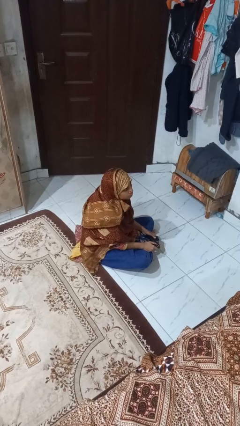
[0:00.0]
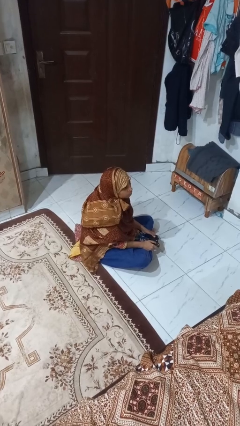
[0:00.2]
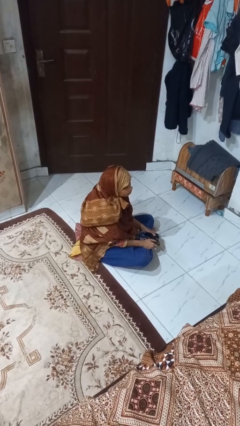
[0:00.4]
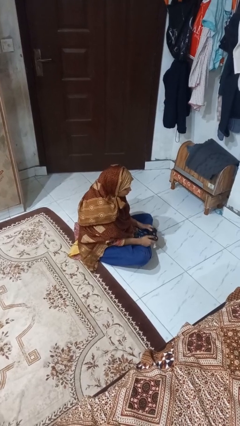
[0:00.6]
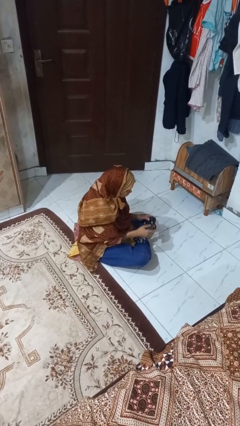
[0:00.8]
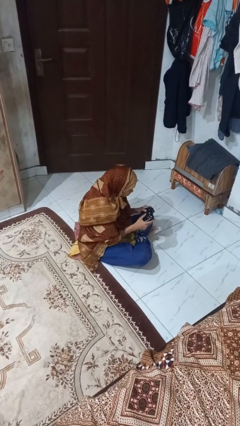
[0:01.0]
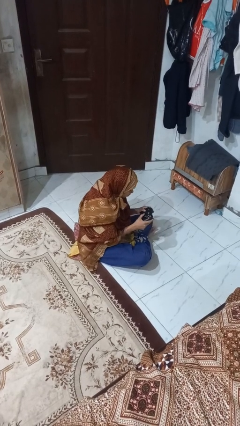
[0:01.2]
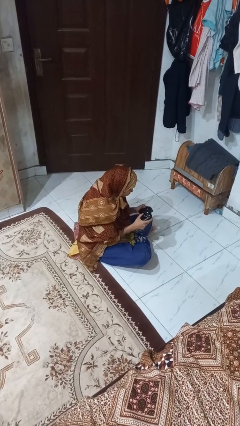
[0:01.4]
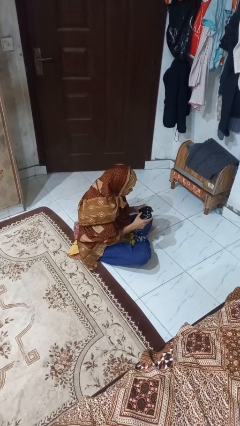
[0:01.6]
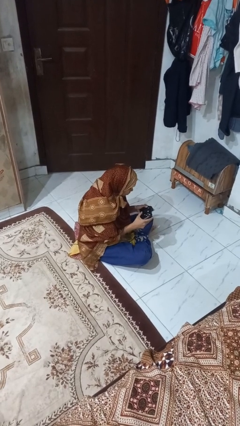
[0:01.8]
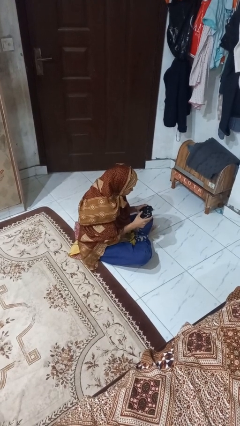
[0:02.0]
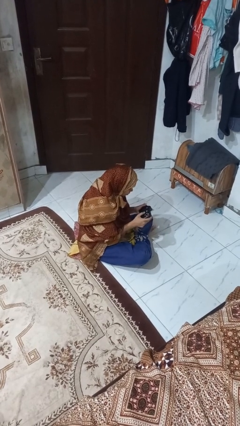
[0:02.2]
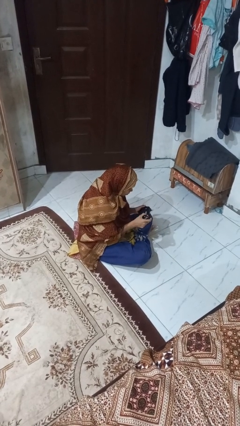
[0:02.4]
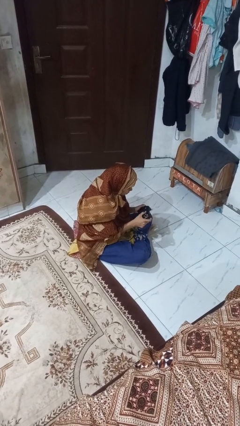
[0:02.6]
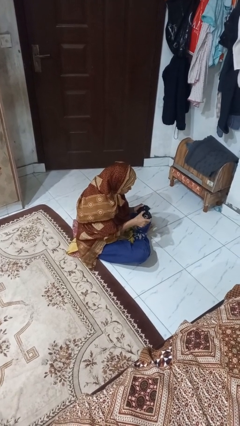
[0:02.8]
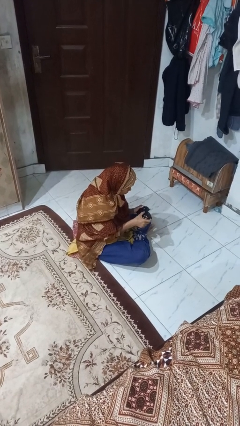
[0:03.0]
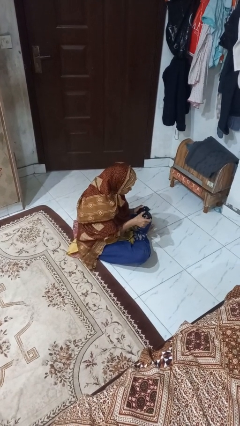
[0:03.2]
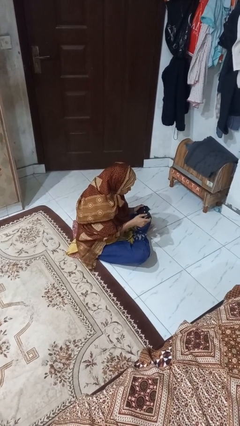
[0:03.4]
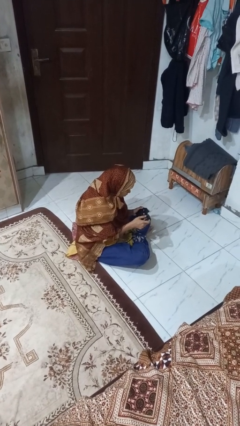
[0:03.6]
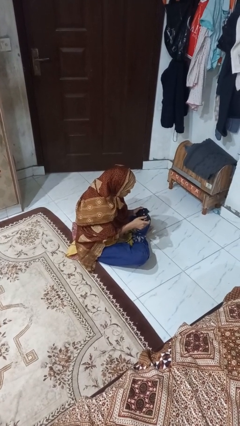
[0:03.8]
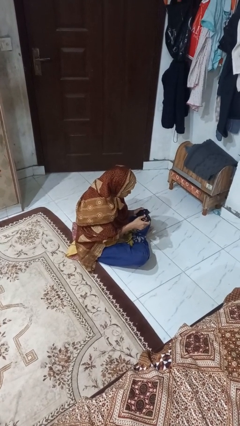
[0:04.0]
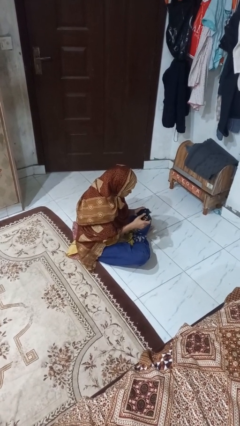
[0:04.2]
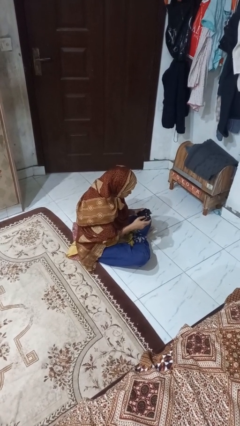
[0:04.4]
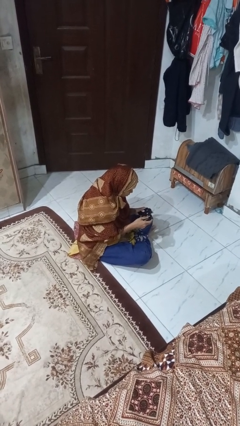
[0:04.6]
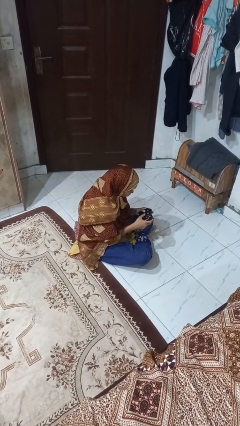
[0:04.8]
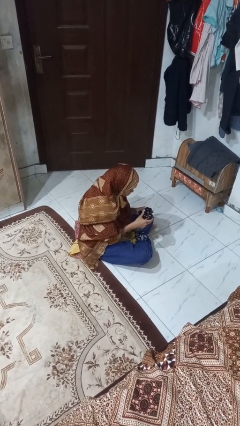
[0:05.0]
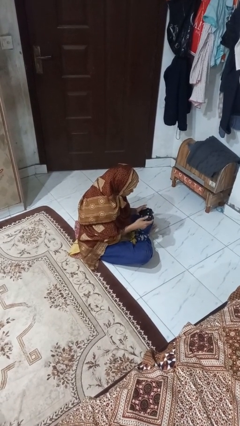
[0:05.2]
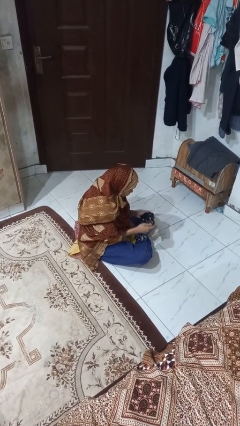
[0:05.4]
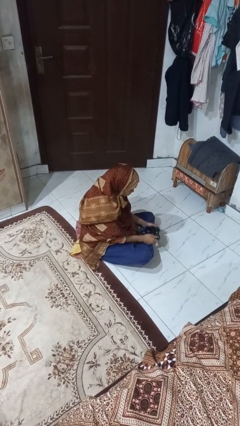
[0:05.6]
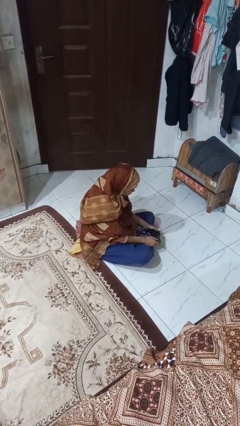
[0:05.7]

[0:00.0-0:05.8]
person interacts with handheld game

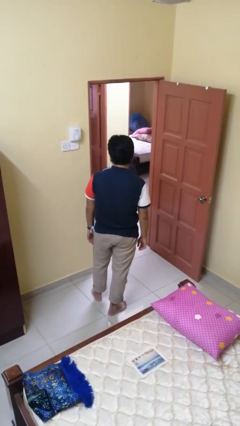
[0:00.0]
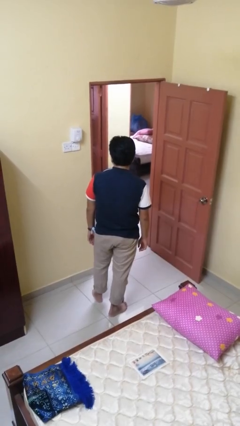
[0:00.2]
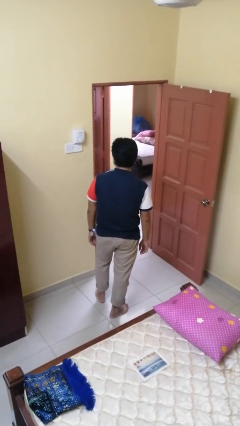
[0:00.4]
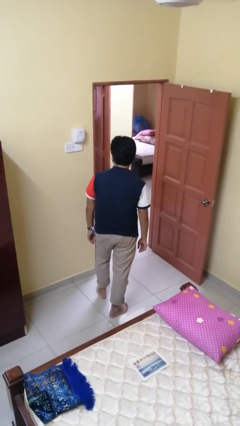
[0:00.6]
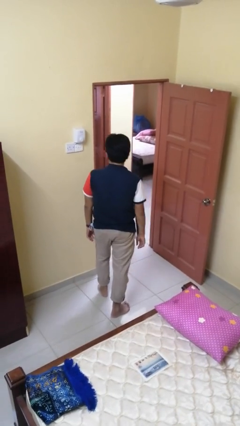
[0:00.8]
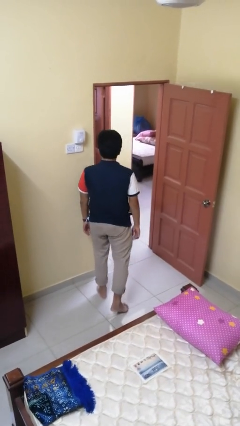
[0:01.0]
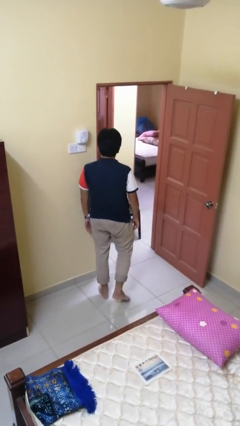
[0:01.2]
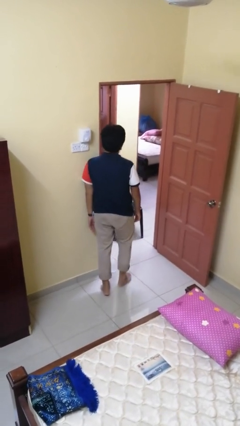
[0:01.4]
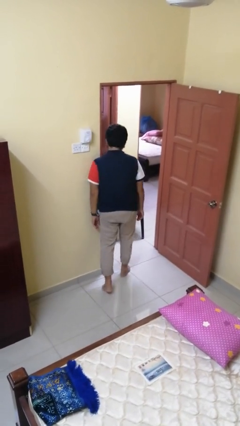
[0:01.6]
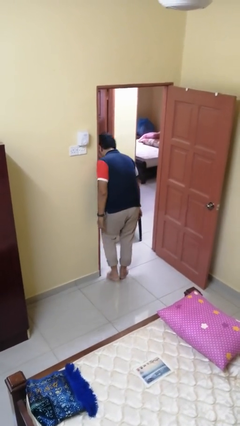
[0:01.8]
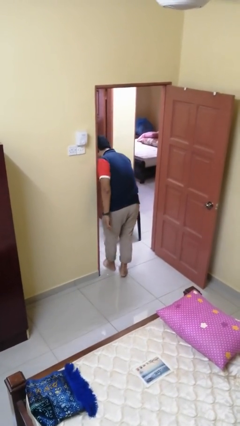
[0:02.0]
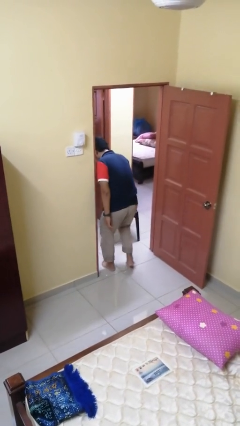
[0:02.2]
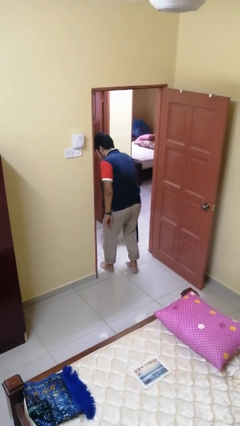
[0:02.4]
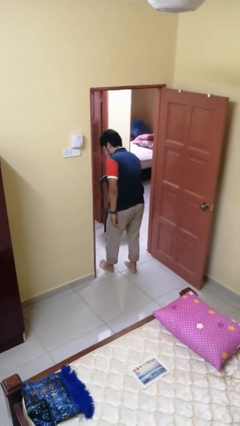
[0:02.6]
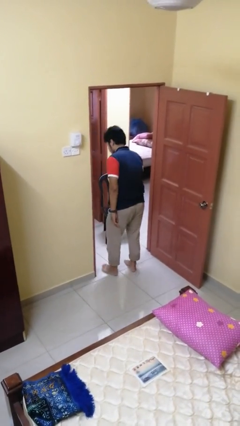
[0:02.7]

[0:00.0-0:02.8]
person bumps into wall

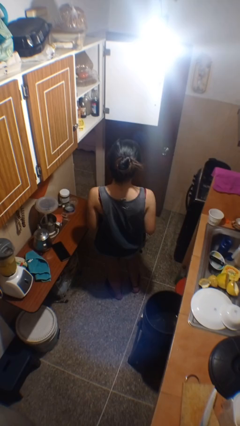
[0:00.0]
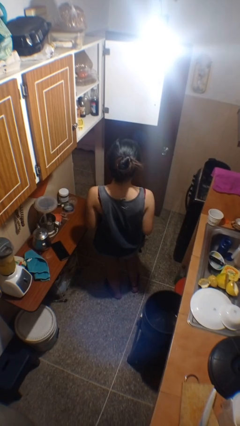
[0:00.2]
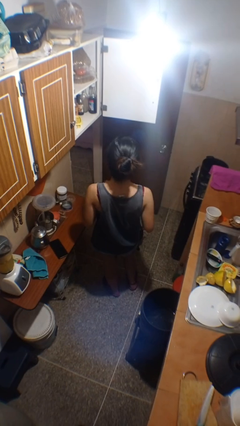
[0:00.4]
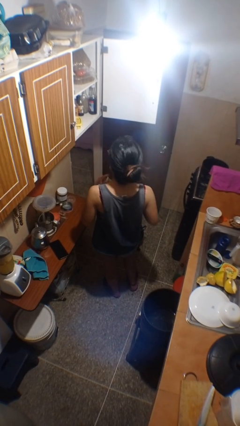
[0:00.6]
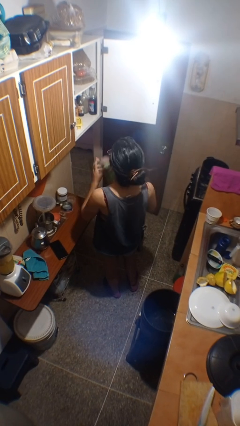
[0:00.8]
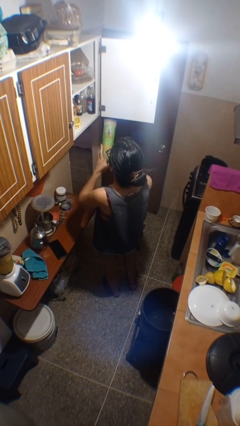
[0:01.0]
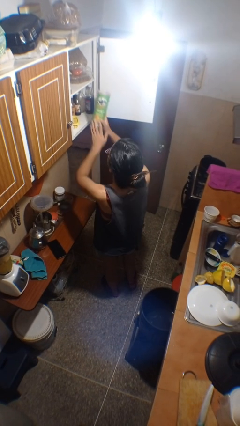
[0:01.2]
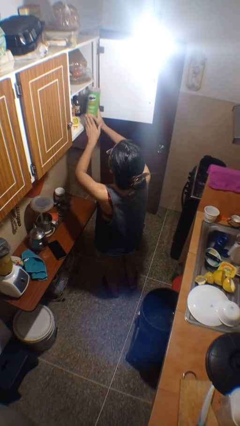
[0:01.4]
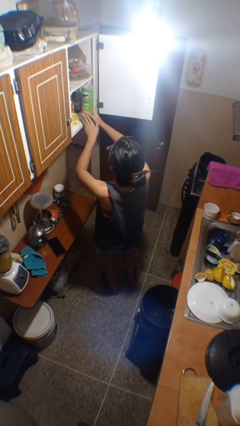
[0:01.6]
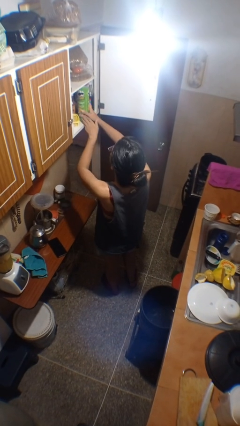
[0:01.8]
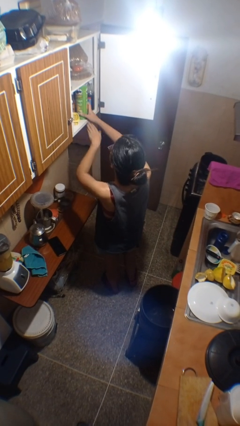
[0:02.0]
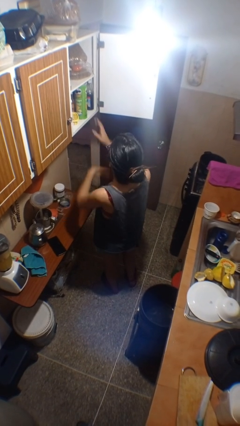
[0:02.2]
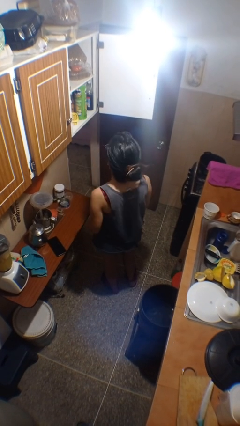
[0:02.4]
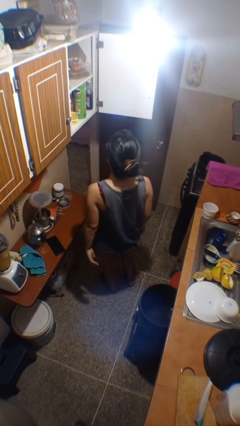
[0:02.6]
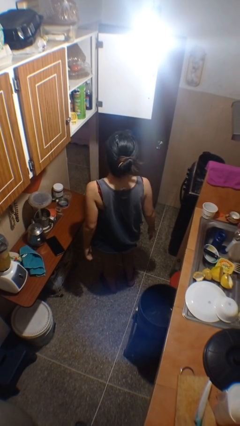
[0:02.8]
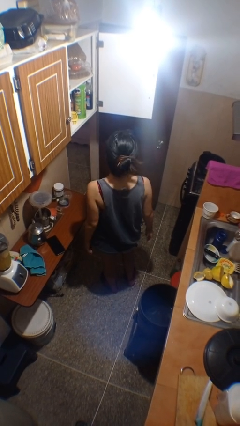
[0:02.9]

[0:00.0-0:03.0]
person puts object in cabinet

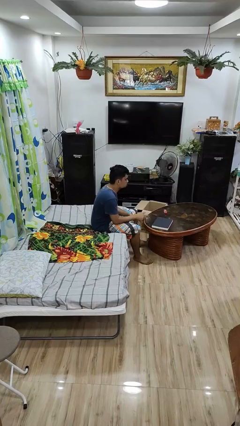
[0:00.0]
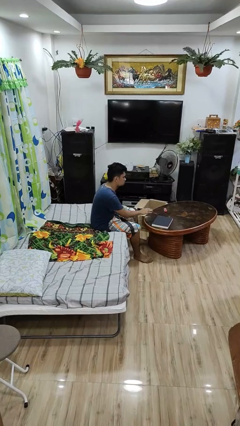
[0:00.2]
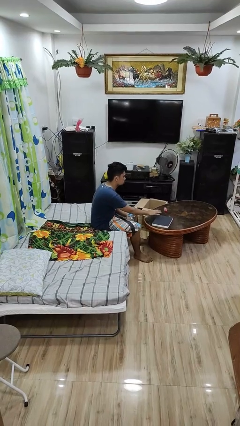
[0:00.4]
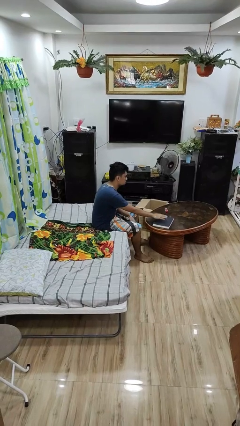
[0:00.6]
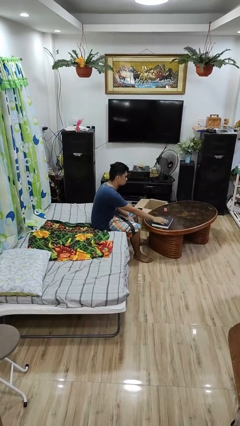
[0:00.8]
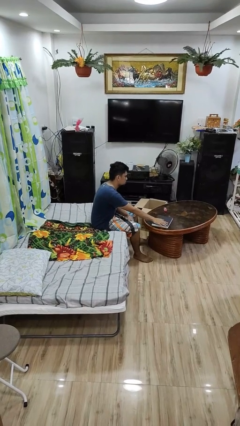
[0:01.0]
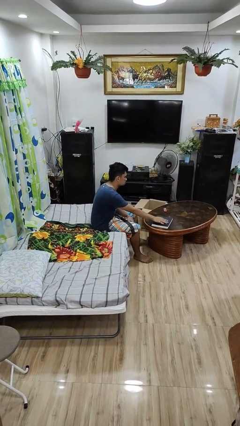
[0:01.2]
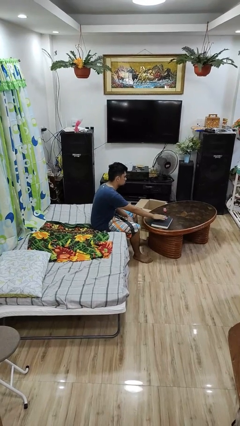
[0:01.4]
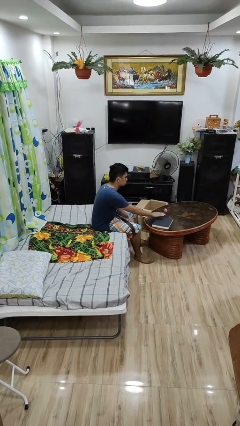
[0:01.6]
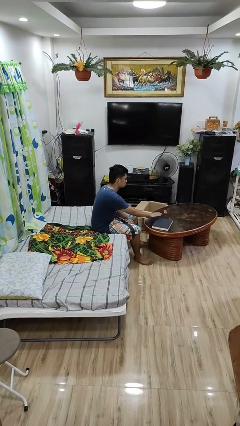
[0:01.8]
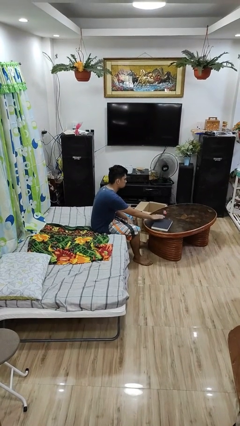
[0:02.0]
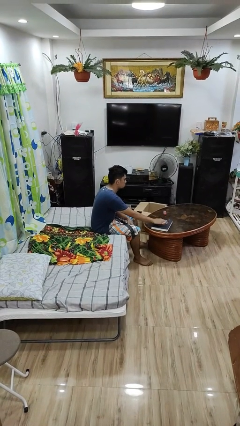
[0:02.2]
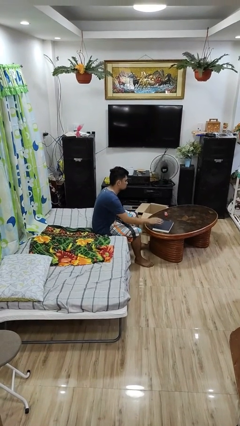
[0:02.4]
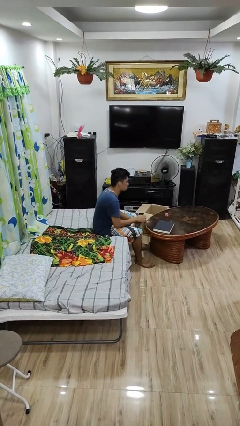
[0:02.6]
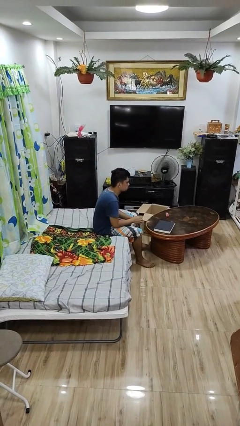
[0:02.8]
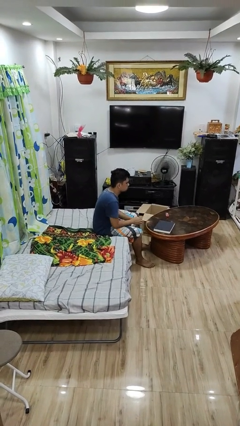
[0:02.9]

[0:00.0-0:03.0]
person waves hand over object

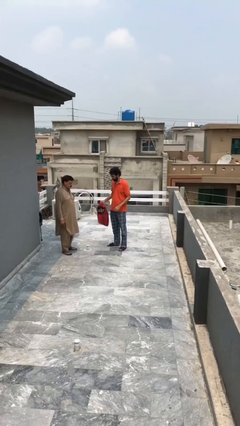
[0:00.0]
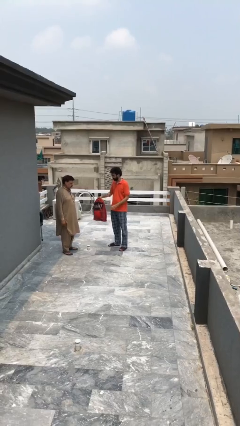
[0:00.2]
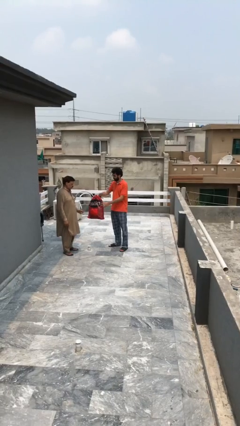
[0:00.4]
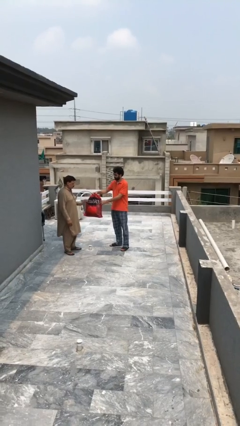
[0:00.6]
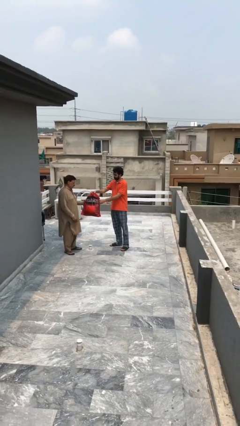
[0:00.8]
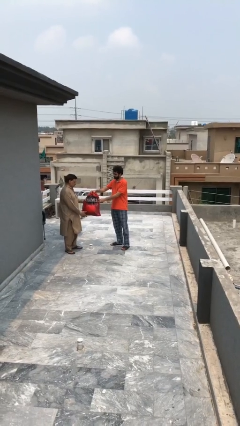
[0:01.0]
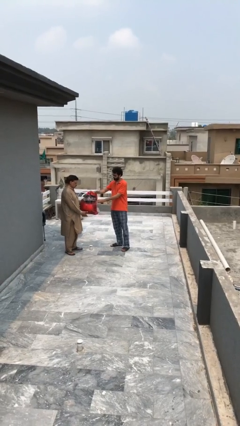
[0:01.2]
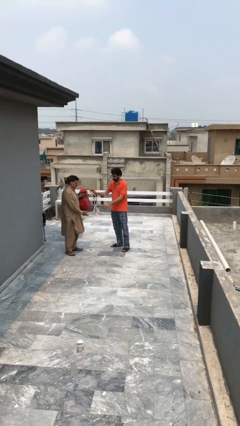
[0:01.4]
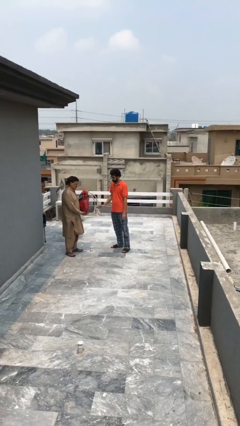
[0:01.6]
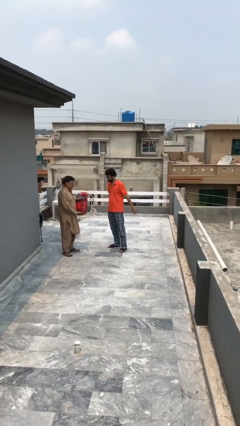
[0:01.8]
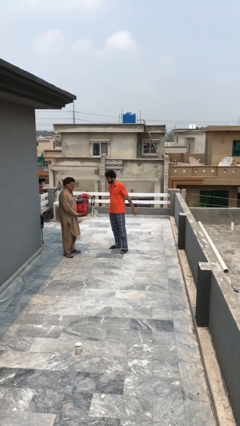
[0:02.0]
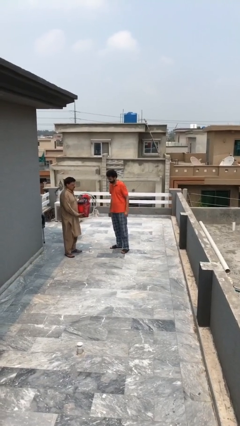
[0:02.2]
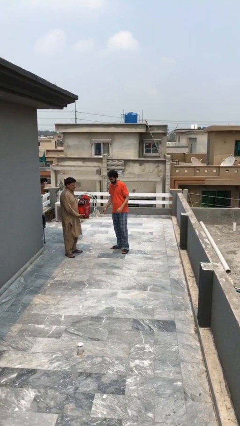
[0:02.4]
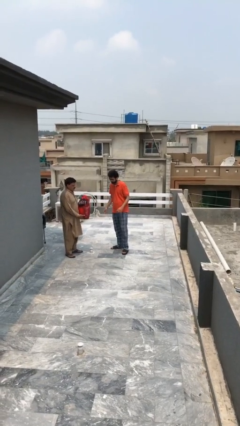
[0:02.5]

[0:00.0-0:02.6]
person transfers object to person
